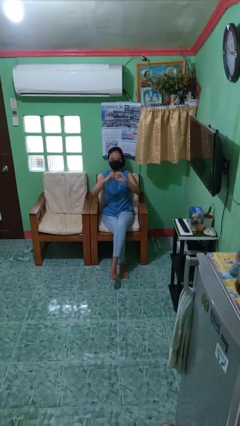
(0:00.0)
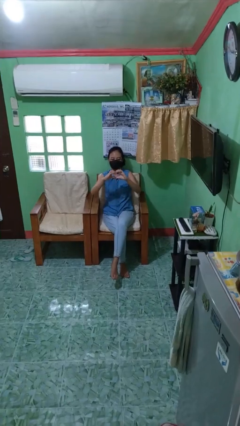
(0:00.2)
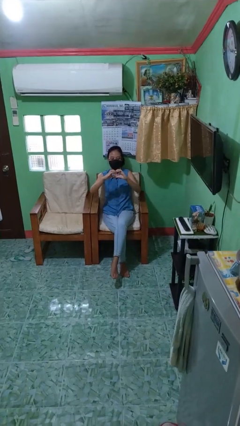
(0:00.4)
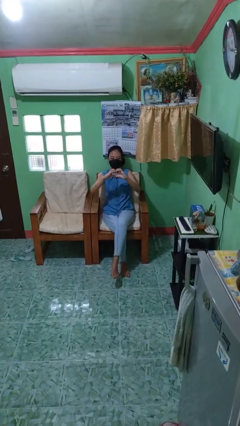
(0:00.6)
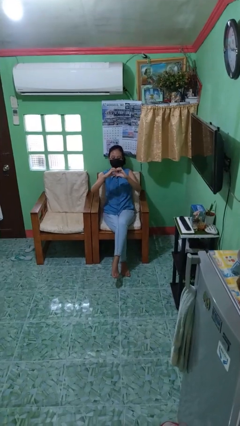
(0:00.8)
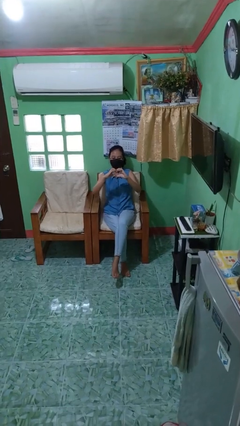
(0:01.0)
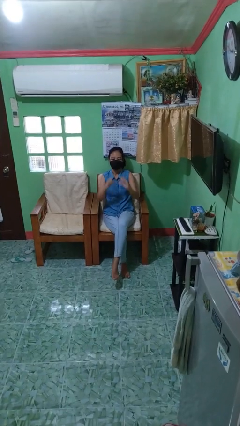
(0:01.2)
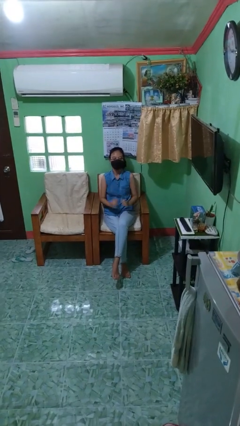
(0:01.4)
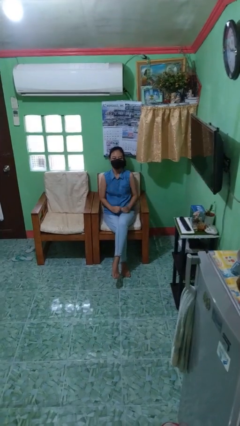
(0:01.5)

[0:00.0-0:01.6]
person gestures heart

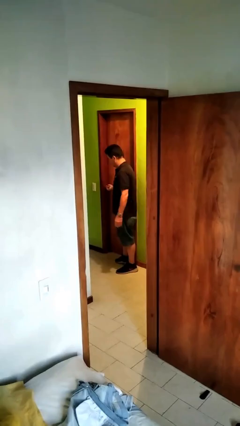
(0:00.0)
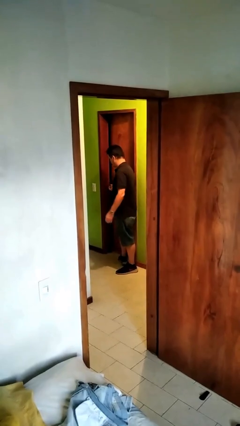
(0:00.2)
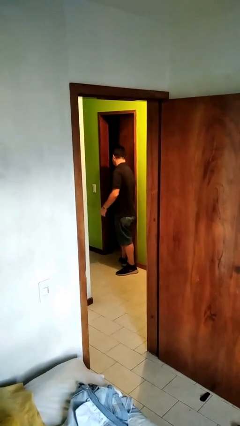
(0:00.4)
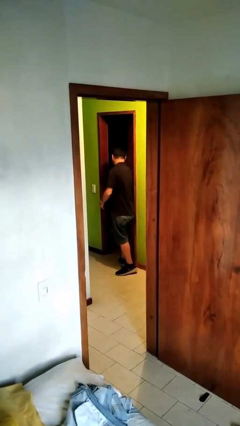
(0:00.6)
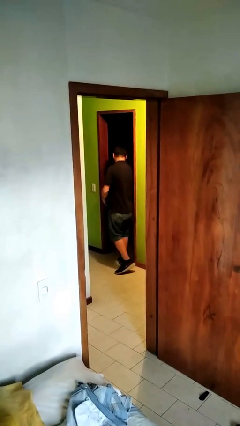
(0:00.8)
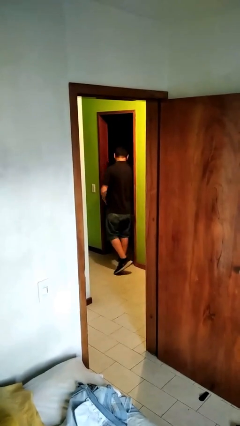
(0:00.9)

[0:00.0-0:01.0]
person opens facility door

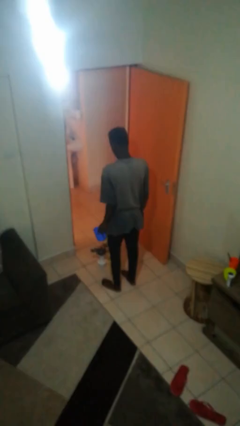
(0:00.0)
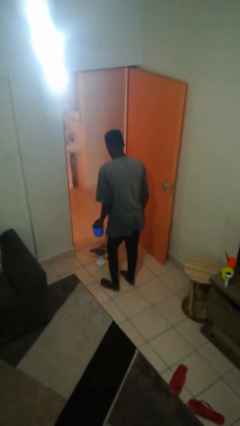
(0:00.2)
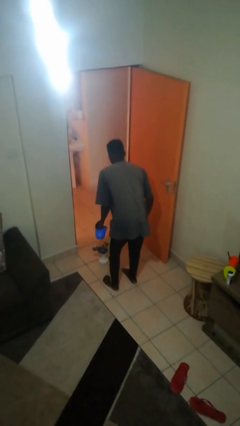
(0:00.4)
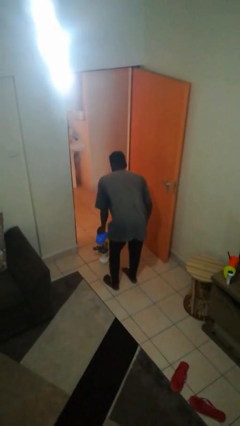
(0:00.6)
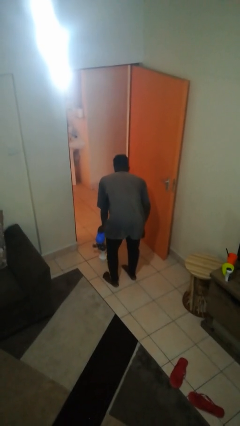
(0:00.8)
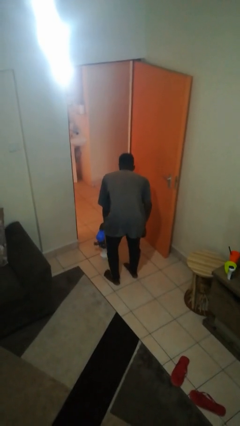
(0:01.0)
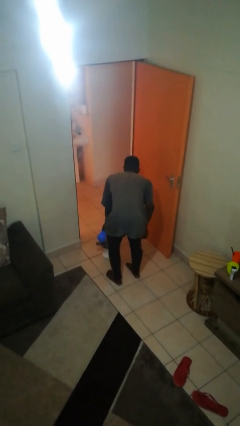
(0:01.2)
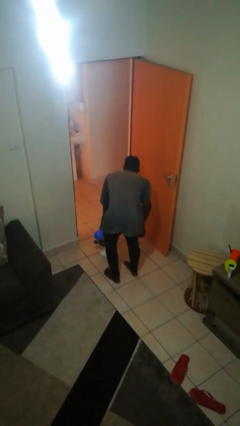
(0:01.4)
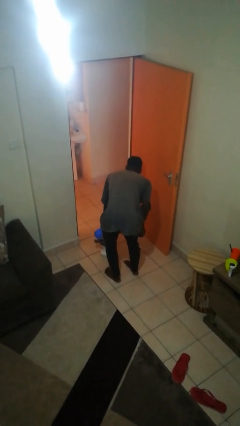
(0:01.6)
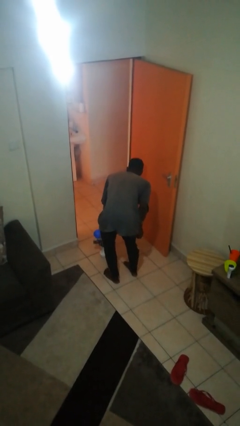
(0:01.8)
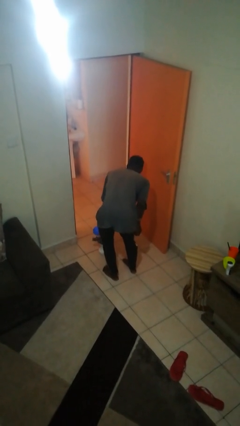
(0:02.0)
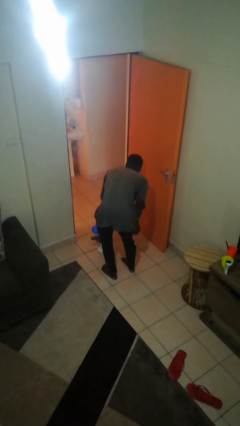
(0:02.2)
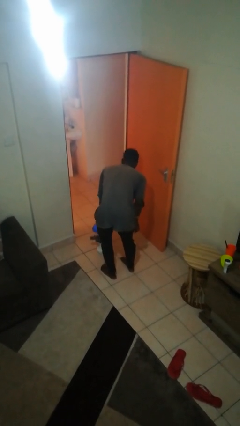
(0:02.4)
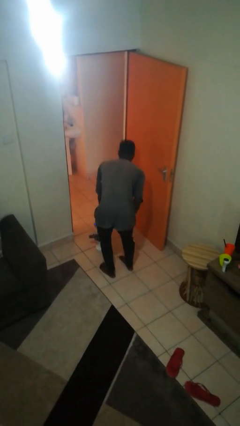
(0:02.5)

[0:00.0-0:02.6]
person waters houseplant

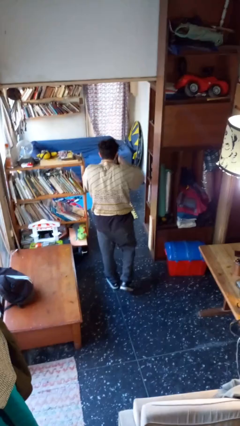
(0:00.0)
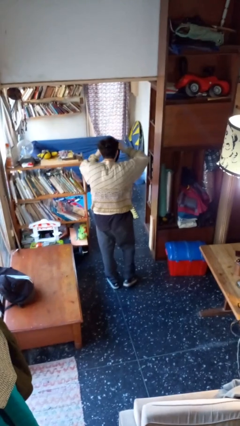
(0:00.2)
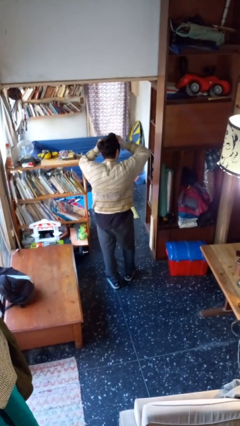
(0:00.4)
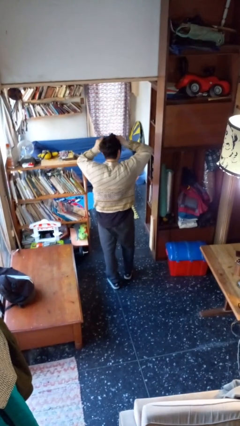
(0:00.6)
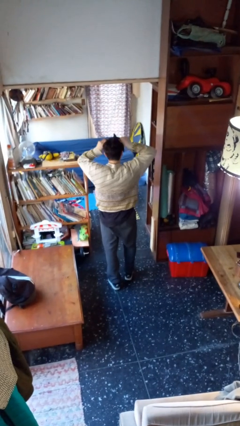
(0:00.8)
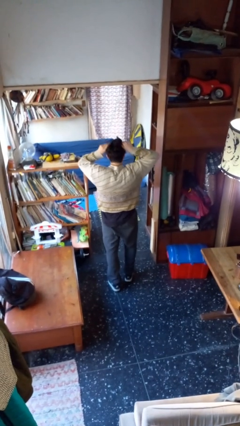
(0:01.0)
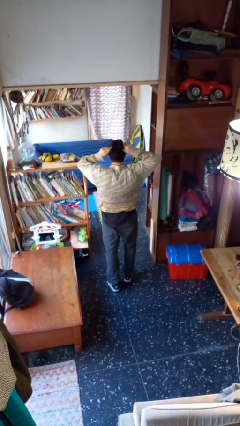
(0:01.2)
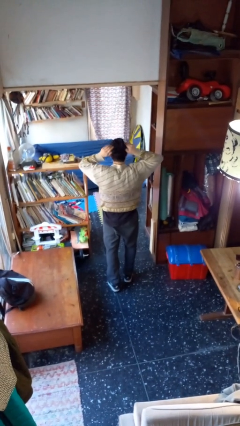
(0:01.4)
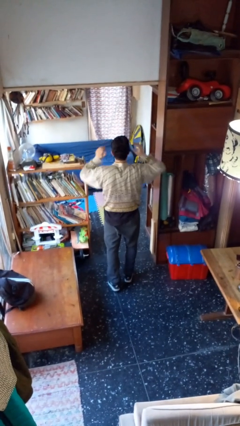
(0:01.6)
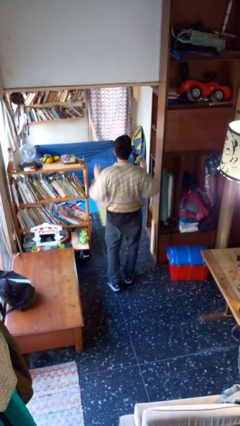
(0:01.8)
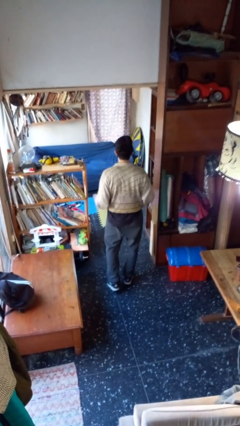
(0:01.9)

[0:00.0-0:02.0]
person puts on facemask

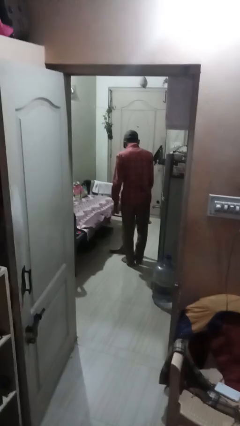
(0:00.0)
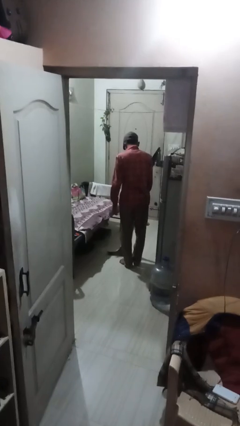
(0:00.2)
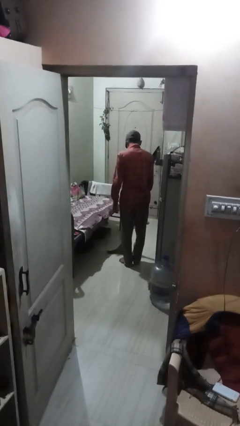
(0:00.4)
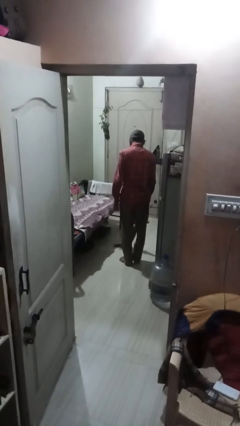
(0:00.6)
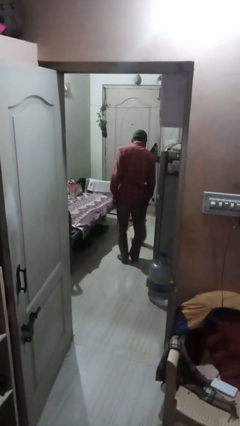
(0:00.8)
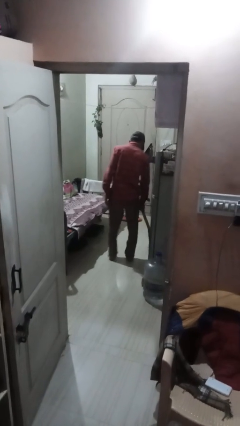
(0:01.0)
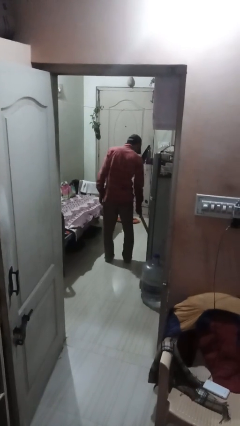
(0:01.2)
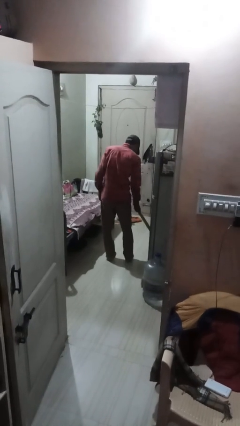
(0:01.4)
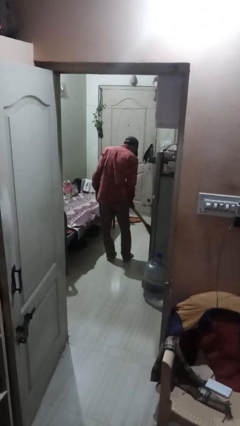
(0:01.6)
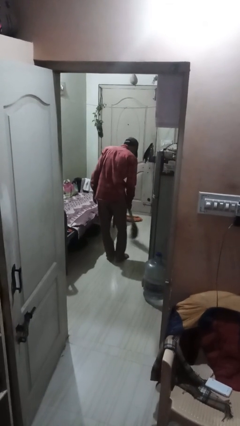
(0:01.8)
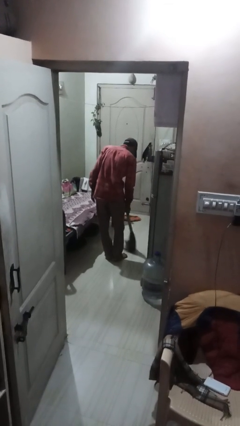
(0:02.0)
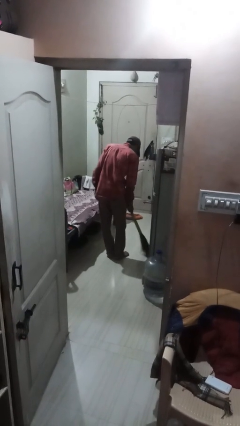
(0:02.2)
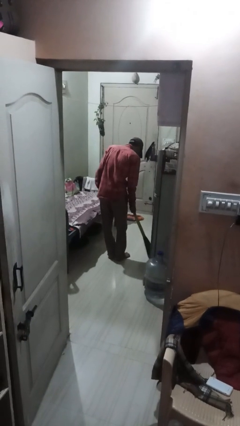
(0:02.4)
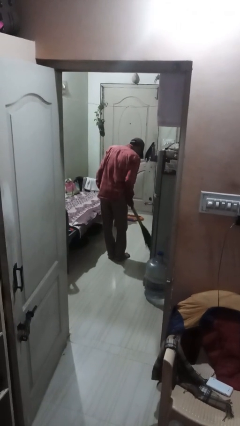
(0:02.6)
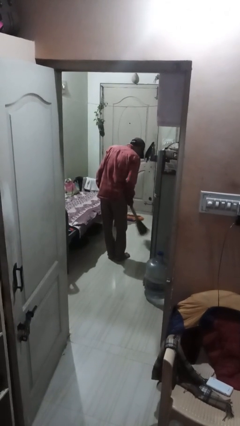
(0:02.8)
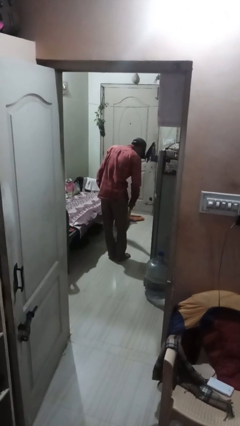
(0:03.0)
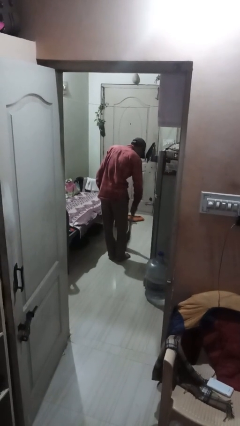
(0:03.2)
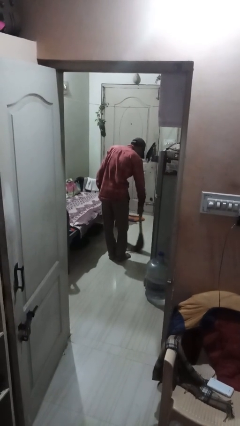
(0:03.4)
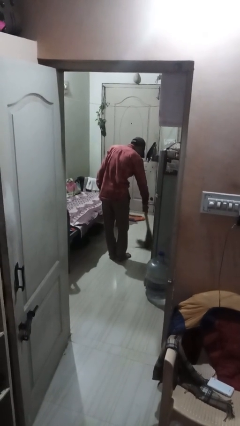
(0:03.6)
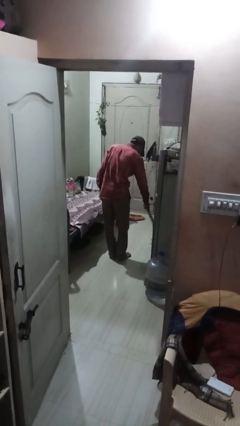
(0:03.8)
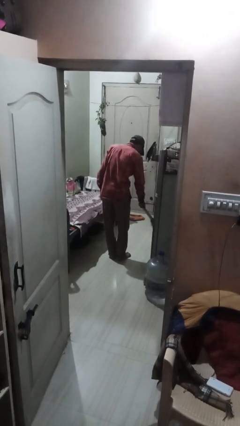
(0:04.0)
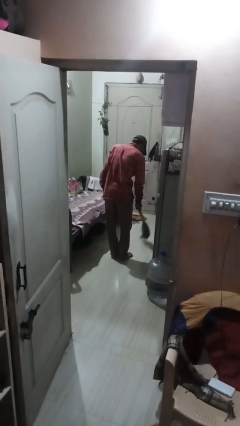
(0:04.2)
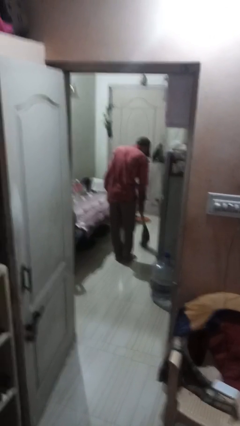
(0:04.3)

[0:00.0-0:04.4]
person sweeps floor

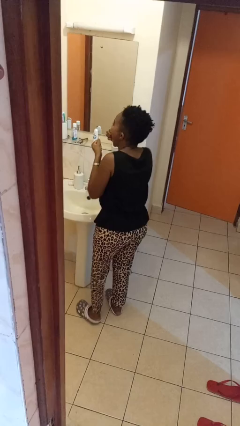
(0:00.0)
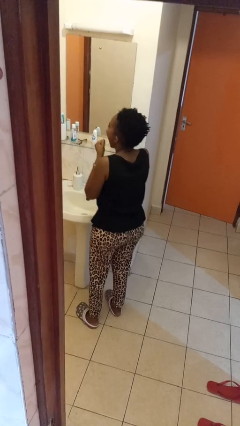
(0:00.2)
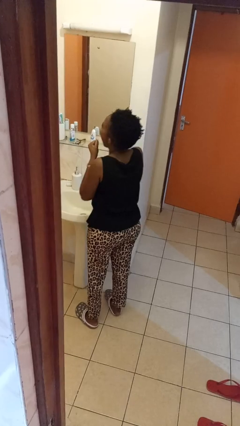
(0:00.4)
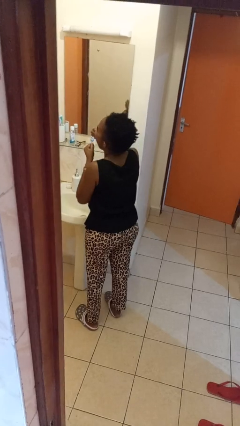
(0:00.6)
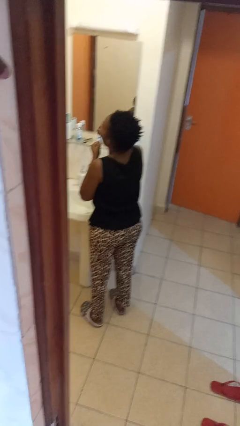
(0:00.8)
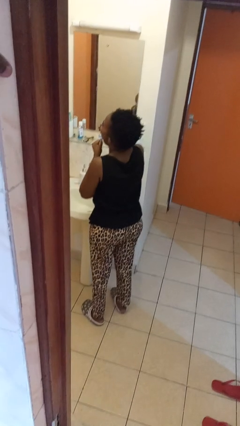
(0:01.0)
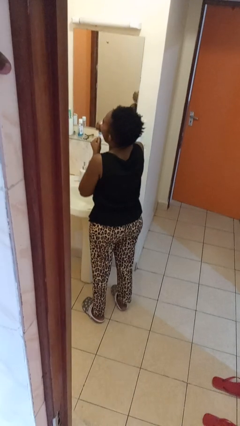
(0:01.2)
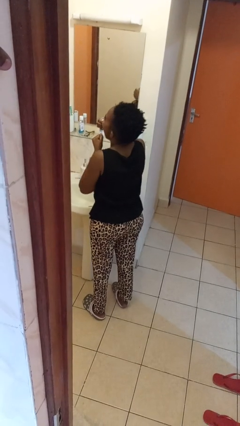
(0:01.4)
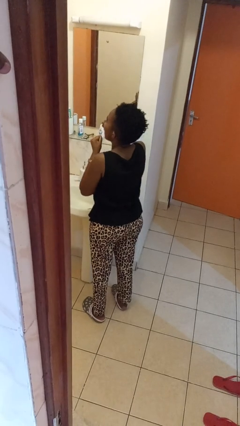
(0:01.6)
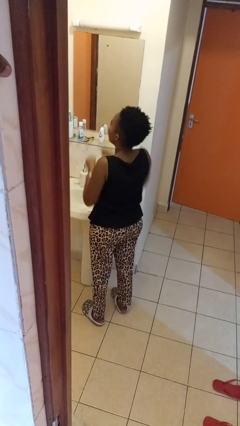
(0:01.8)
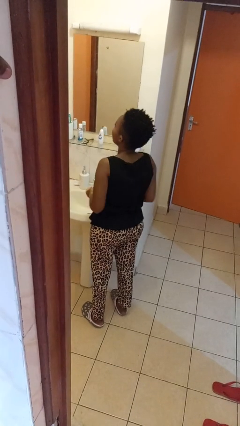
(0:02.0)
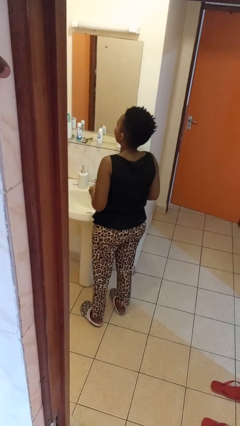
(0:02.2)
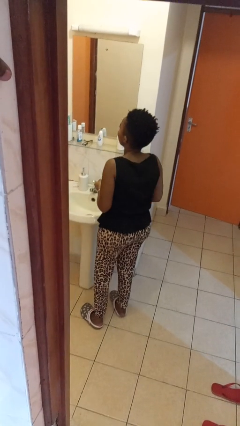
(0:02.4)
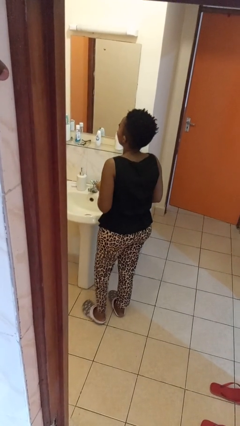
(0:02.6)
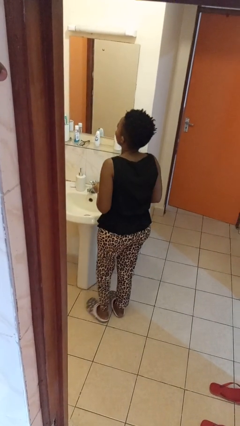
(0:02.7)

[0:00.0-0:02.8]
person flosses

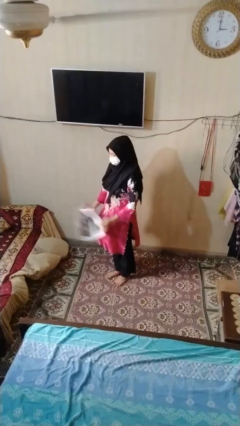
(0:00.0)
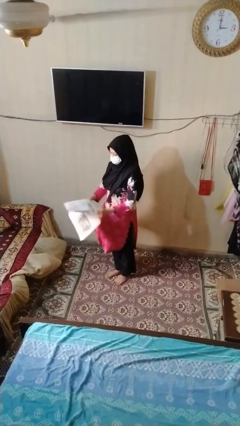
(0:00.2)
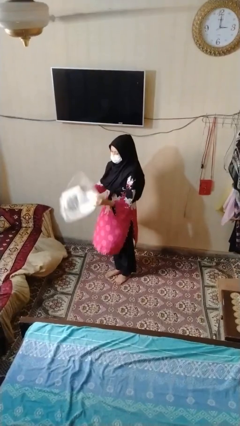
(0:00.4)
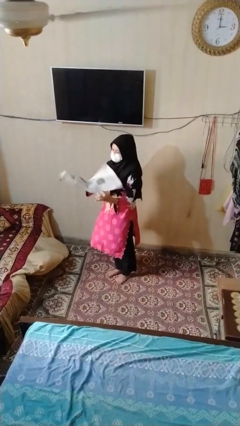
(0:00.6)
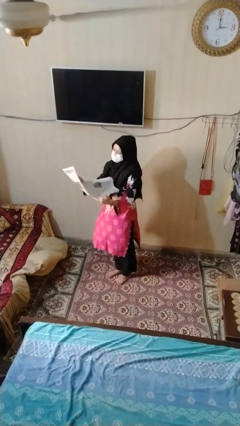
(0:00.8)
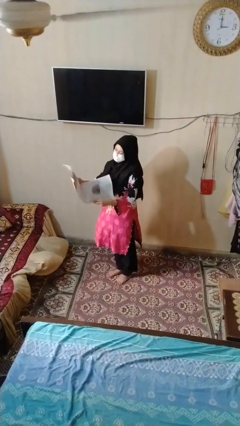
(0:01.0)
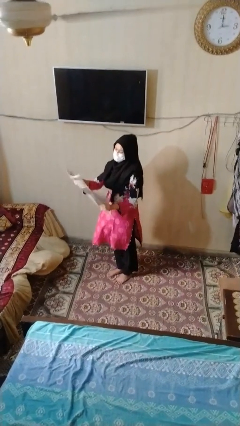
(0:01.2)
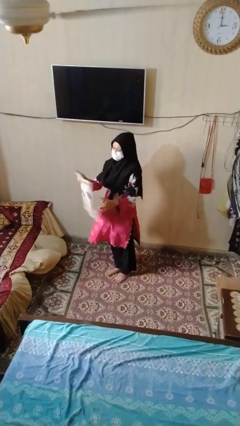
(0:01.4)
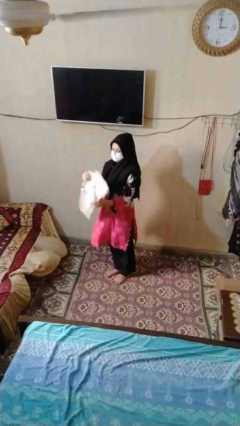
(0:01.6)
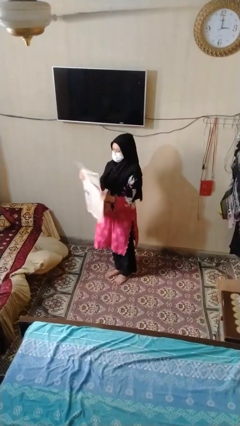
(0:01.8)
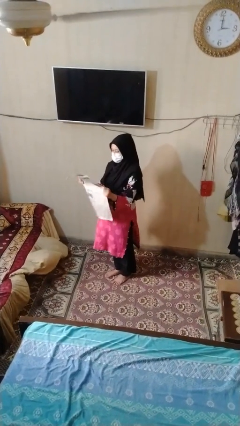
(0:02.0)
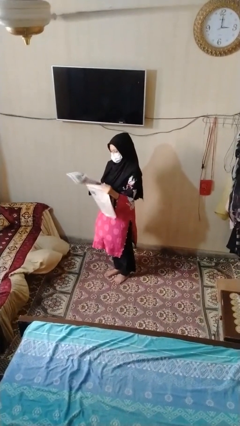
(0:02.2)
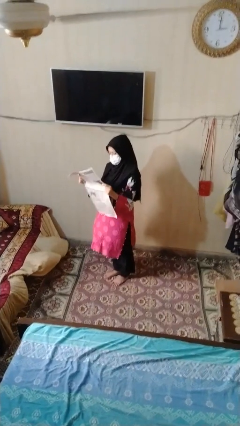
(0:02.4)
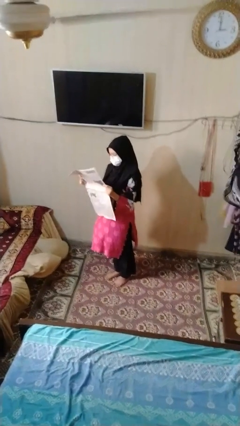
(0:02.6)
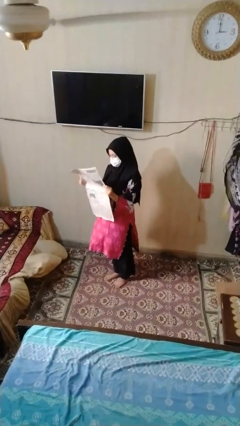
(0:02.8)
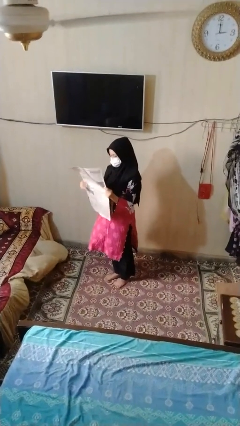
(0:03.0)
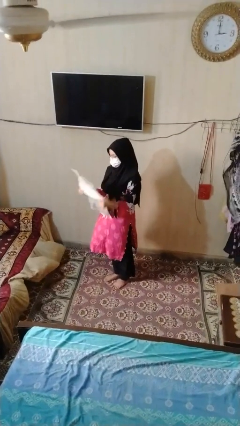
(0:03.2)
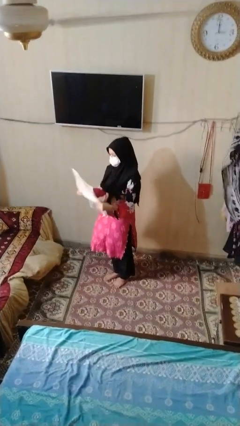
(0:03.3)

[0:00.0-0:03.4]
person reads newspaper
